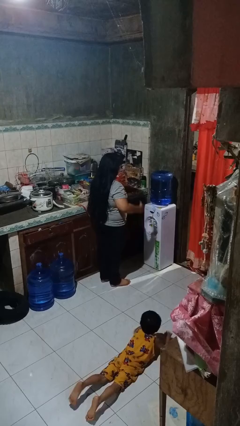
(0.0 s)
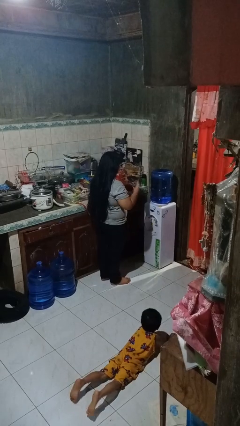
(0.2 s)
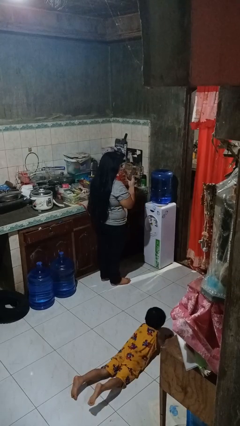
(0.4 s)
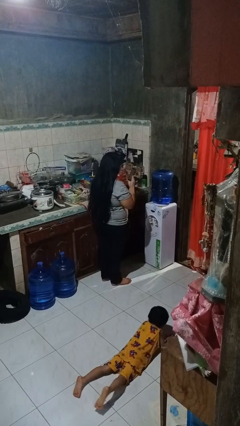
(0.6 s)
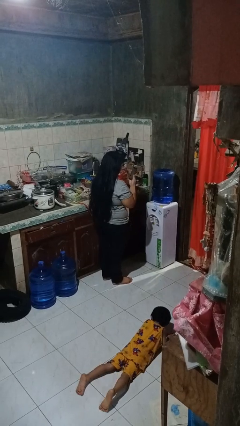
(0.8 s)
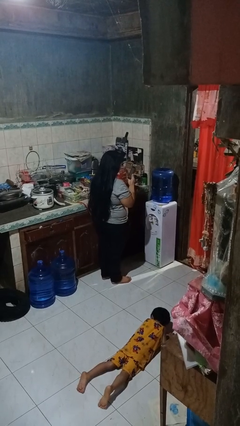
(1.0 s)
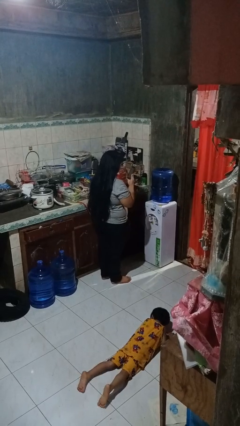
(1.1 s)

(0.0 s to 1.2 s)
person takes phone from pocket

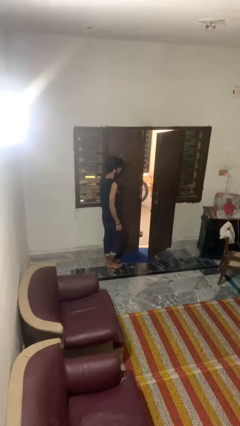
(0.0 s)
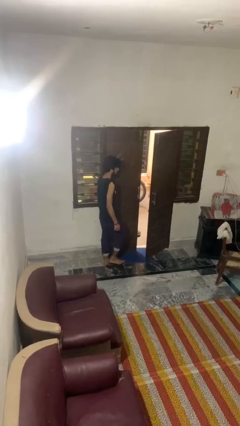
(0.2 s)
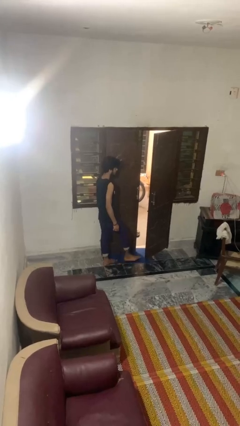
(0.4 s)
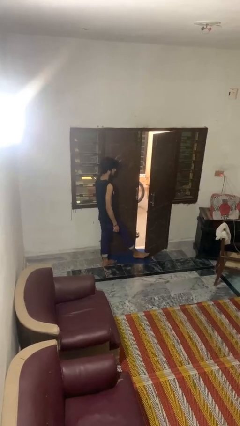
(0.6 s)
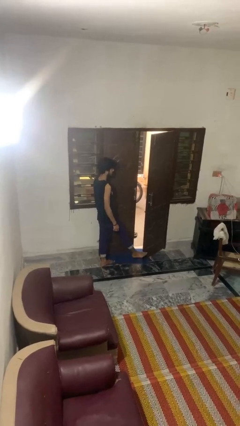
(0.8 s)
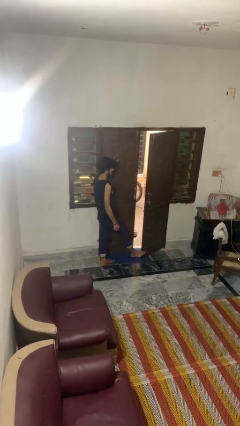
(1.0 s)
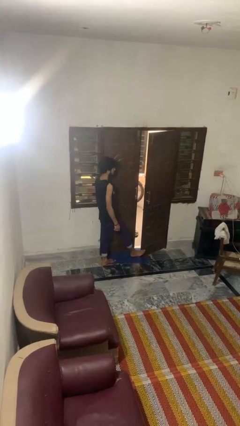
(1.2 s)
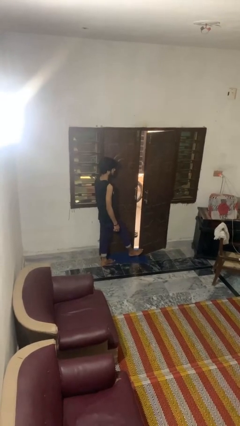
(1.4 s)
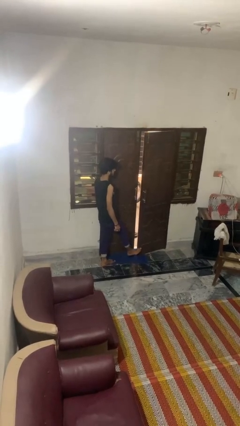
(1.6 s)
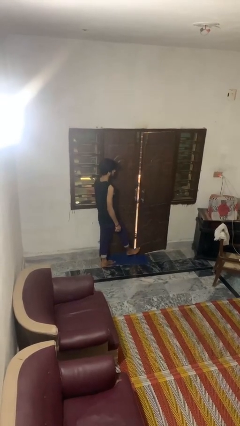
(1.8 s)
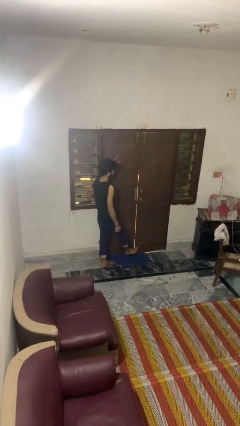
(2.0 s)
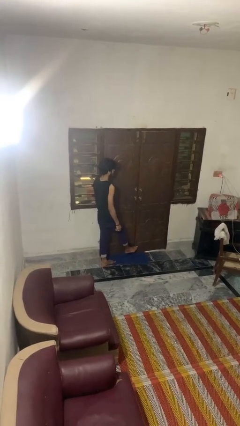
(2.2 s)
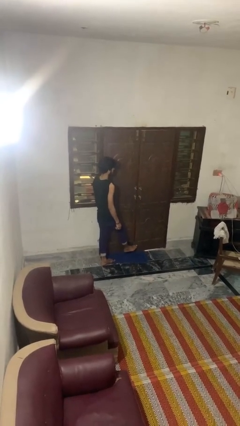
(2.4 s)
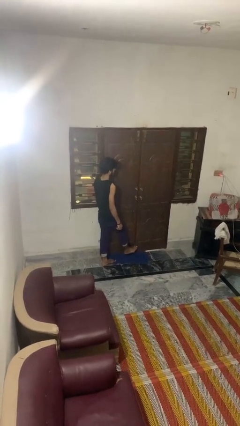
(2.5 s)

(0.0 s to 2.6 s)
person closes door with foot

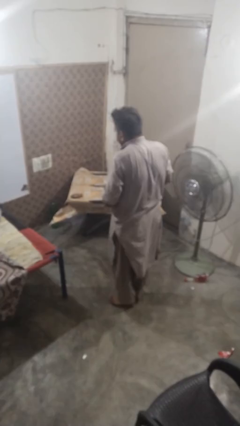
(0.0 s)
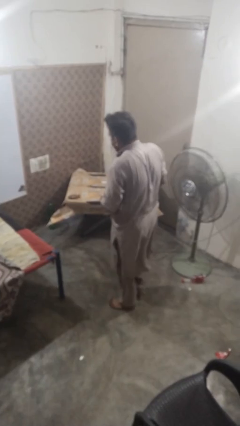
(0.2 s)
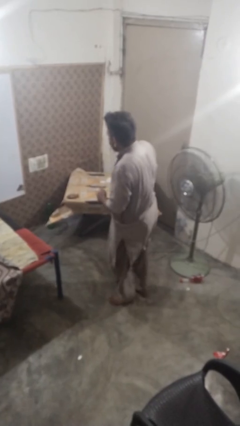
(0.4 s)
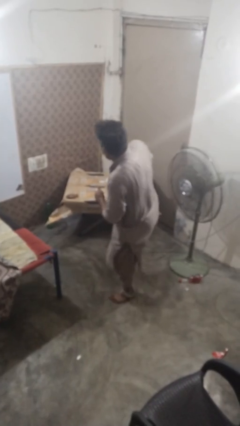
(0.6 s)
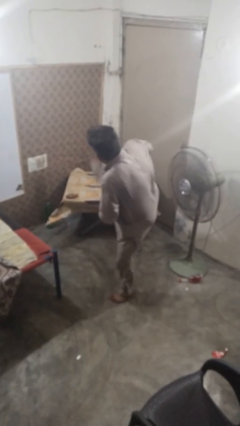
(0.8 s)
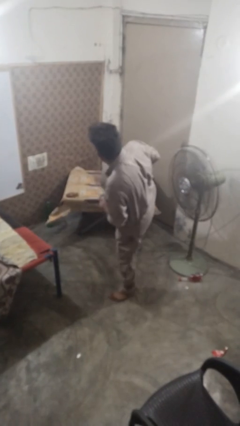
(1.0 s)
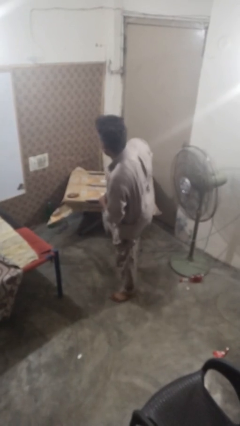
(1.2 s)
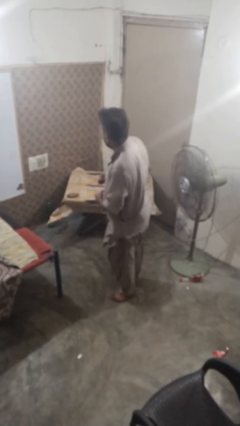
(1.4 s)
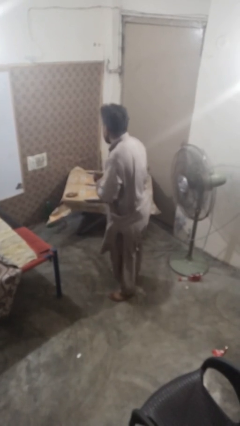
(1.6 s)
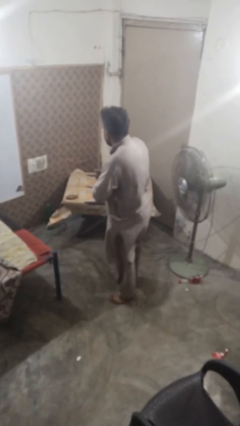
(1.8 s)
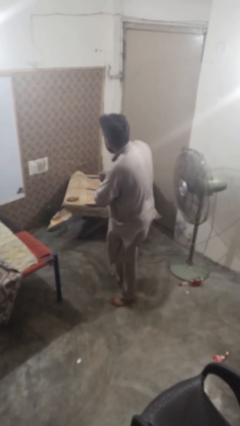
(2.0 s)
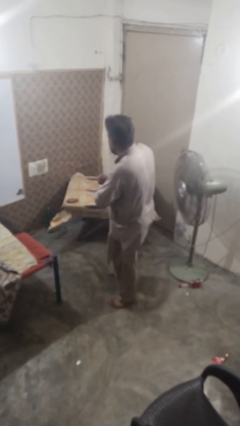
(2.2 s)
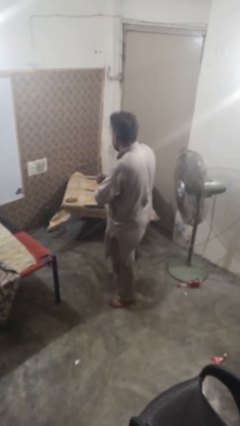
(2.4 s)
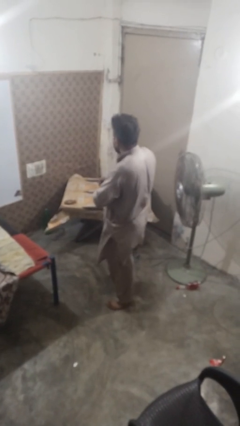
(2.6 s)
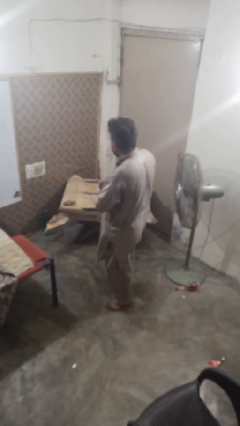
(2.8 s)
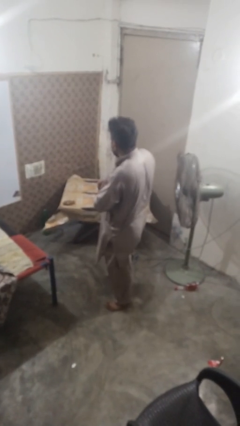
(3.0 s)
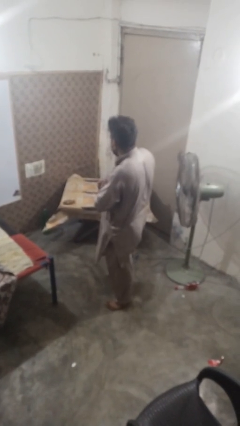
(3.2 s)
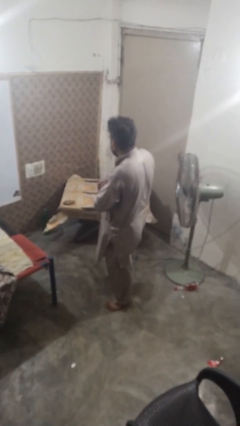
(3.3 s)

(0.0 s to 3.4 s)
person karate kicks

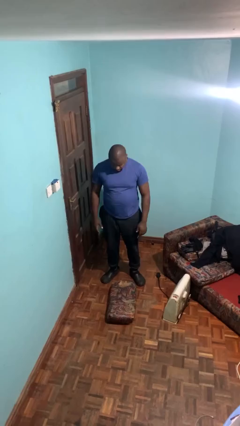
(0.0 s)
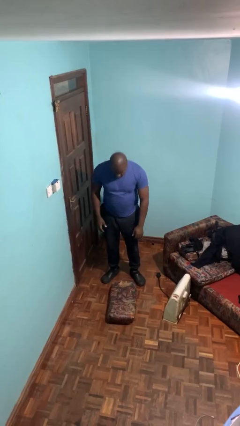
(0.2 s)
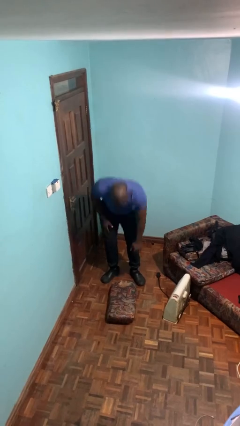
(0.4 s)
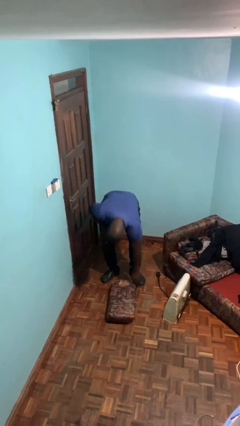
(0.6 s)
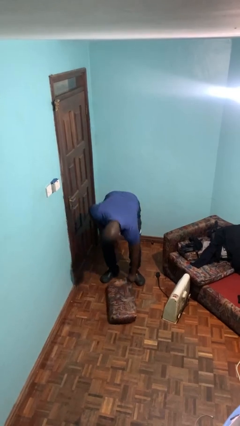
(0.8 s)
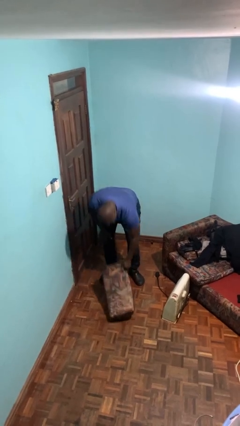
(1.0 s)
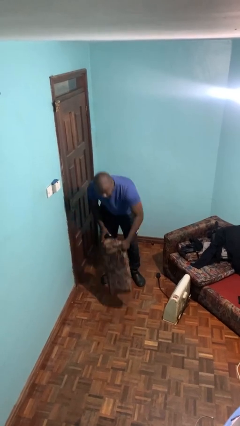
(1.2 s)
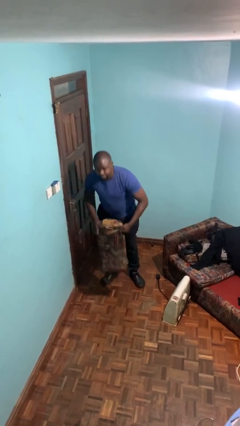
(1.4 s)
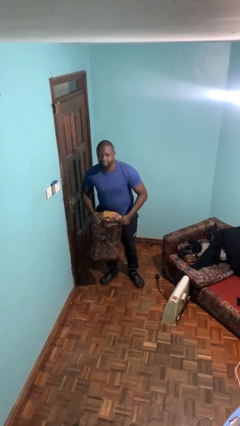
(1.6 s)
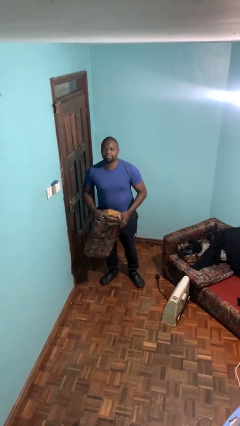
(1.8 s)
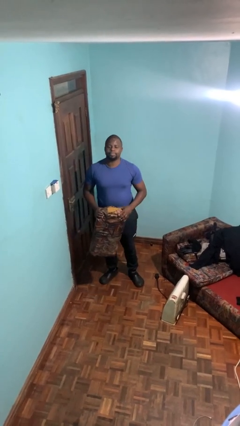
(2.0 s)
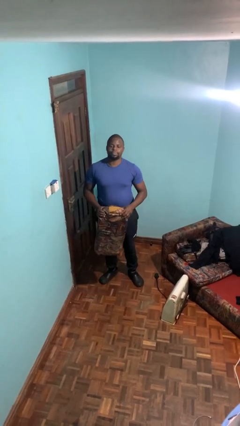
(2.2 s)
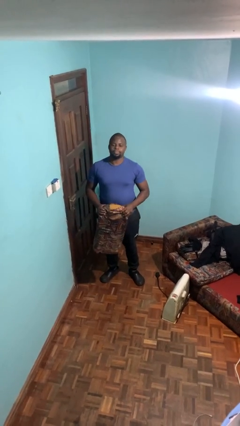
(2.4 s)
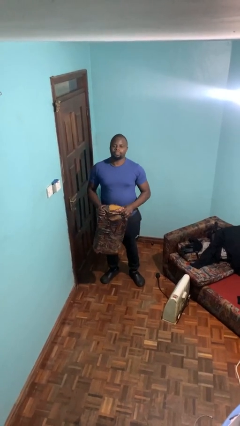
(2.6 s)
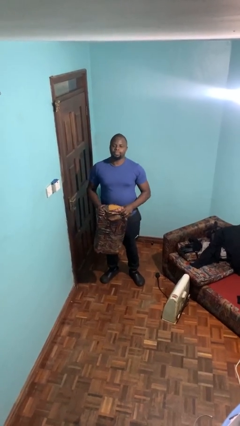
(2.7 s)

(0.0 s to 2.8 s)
person picks up object from floor

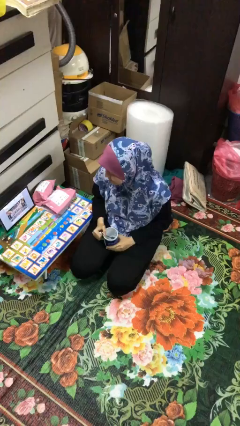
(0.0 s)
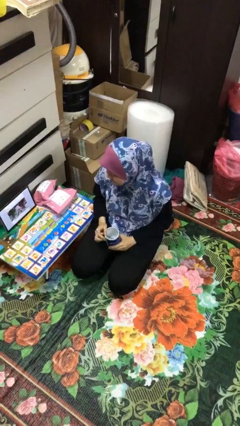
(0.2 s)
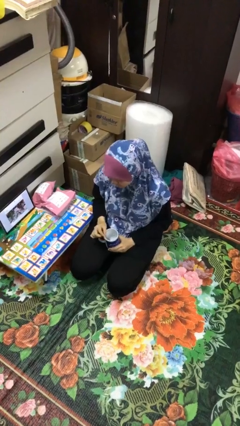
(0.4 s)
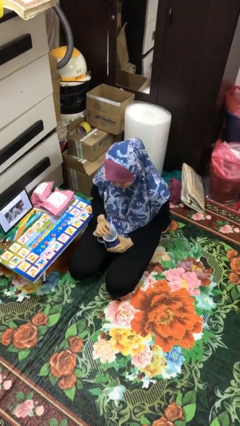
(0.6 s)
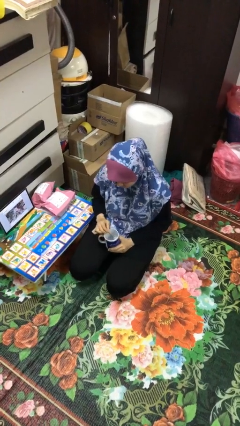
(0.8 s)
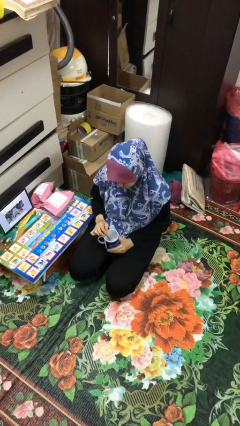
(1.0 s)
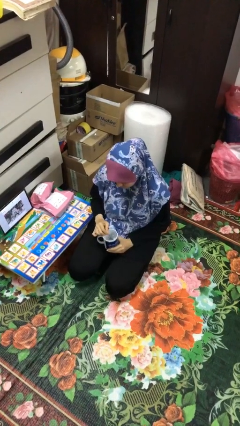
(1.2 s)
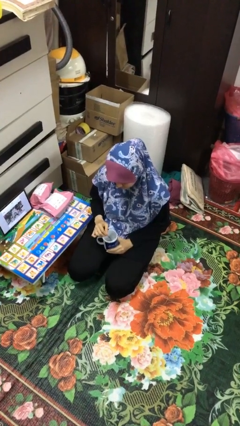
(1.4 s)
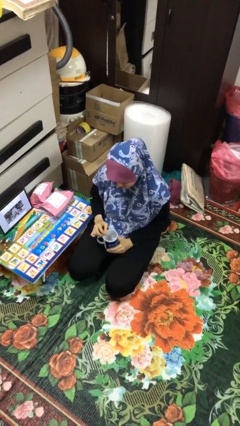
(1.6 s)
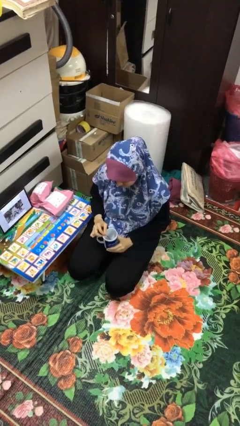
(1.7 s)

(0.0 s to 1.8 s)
person stirs mug

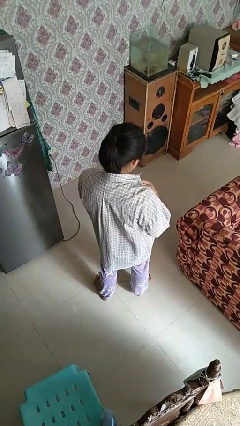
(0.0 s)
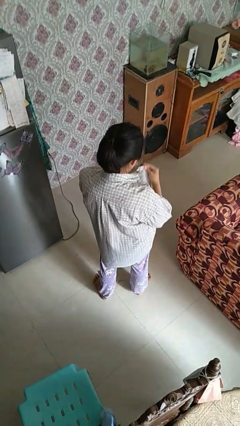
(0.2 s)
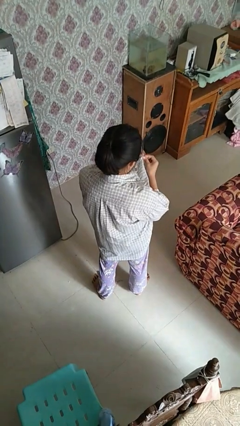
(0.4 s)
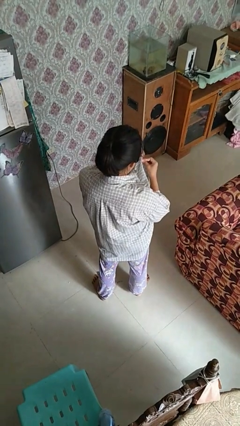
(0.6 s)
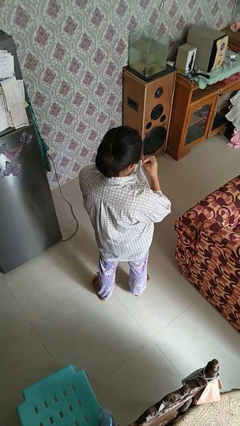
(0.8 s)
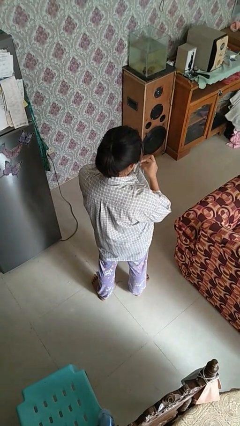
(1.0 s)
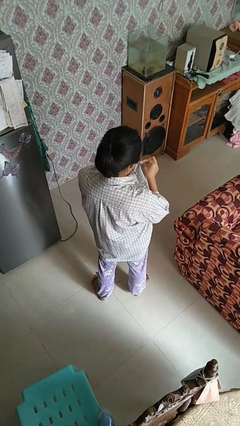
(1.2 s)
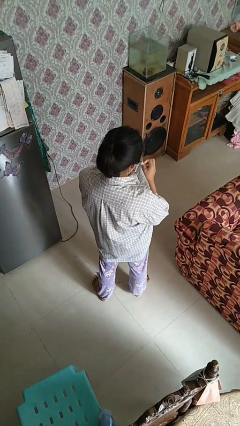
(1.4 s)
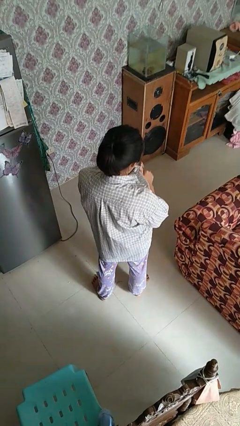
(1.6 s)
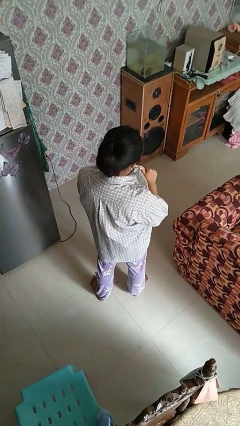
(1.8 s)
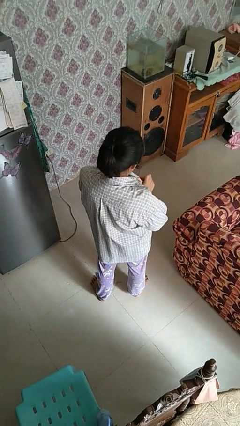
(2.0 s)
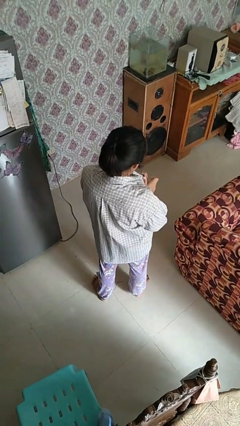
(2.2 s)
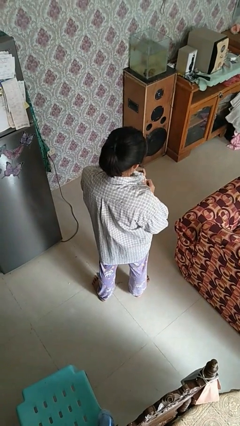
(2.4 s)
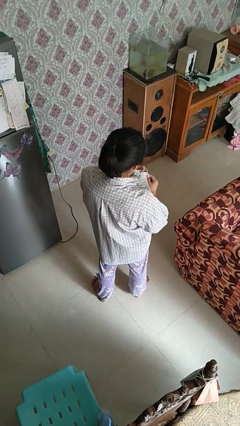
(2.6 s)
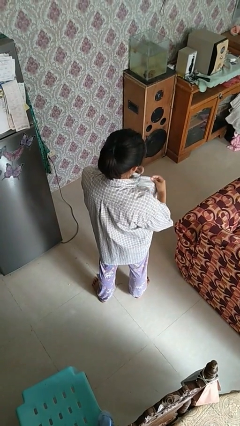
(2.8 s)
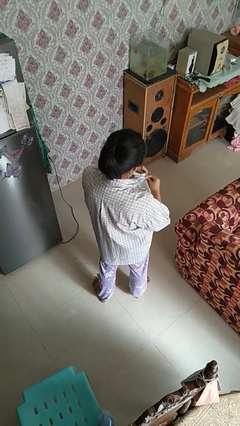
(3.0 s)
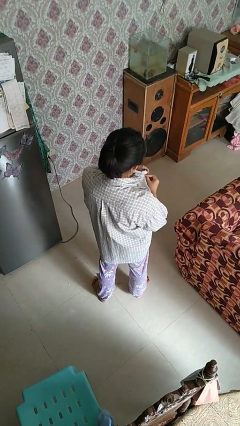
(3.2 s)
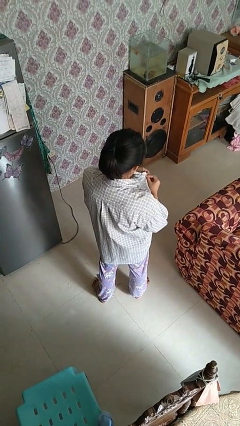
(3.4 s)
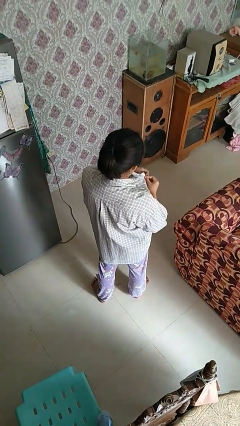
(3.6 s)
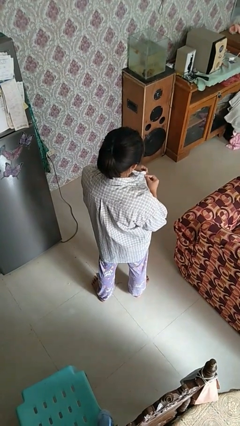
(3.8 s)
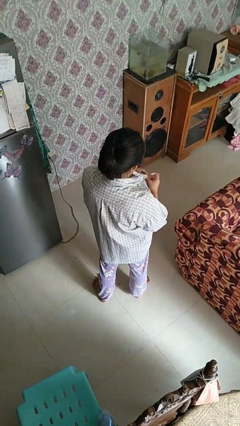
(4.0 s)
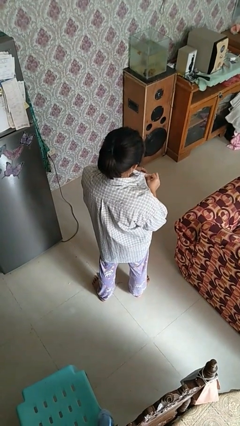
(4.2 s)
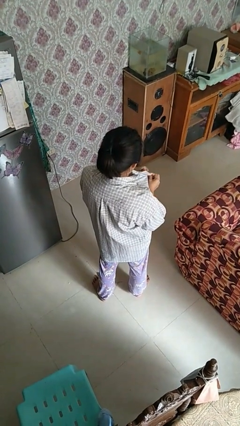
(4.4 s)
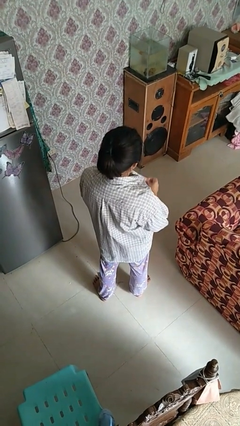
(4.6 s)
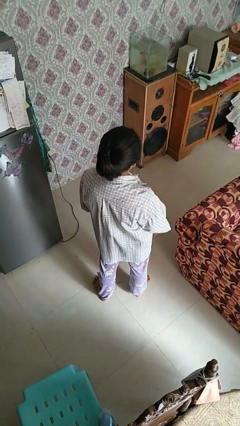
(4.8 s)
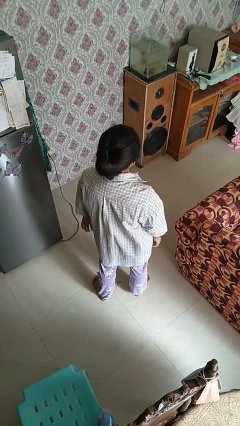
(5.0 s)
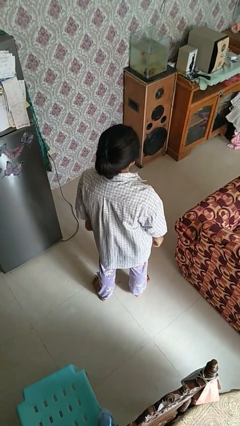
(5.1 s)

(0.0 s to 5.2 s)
person buttons shirt

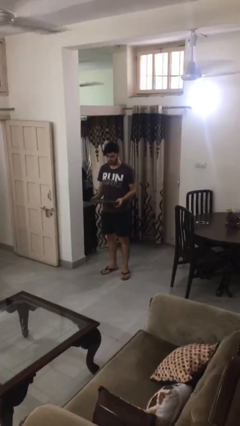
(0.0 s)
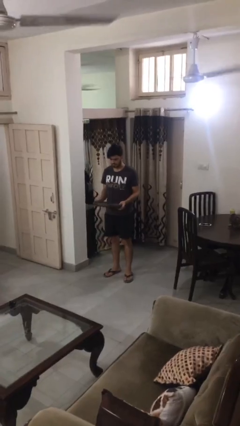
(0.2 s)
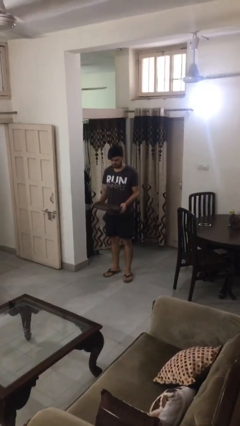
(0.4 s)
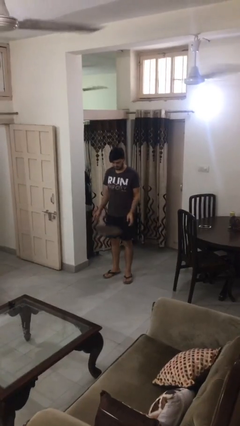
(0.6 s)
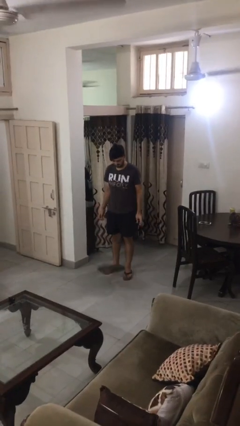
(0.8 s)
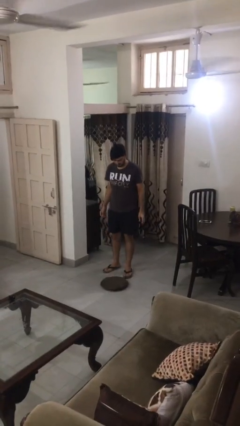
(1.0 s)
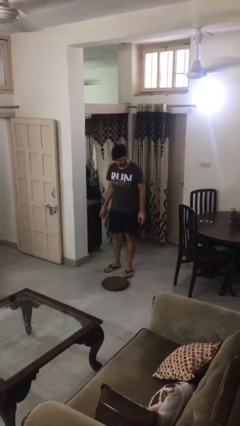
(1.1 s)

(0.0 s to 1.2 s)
person drops object
